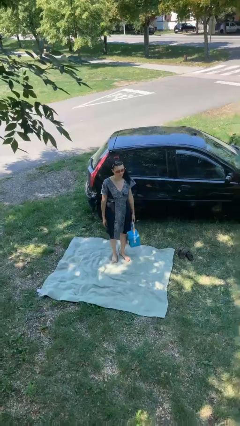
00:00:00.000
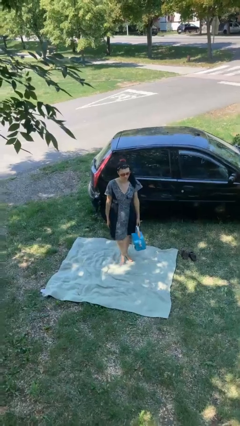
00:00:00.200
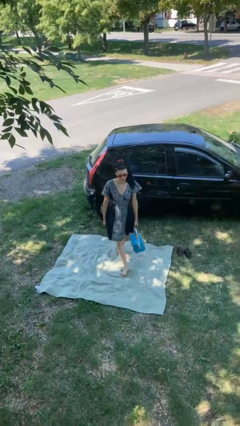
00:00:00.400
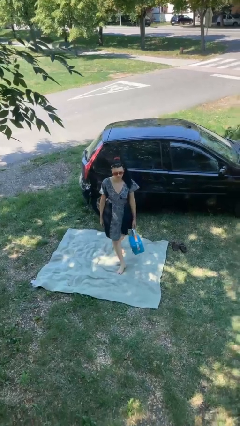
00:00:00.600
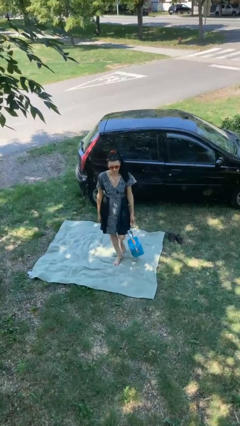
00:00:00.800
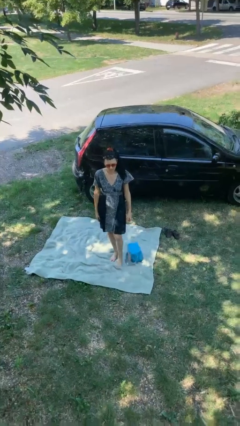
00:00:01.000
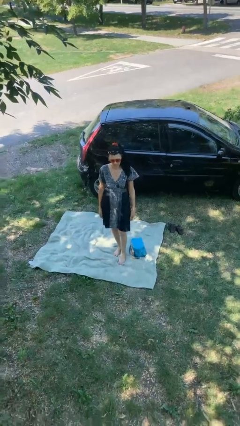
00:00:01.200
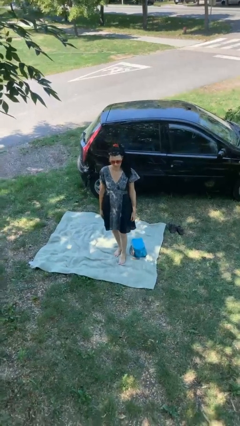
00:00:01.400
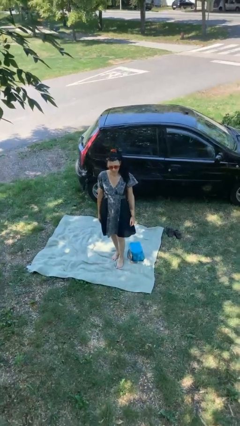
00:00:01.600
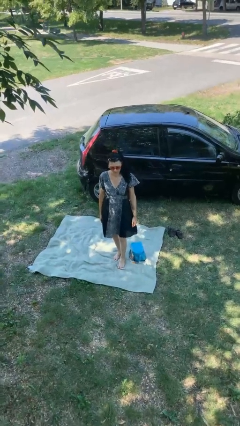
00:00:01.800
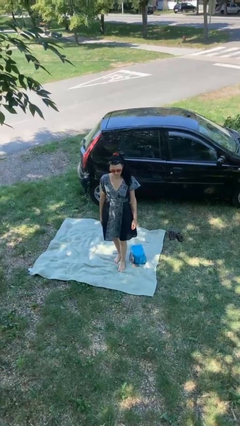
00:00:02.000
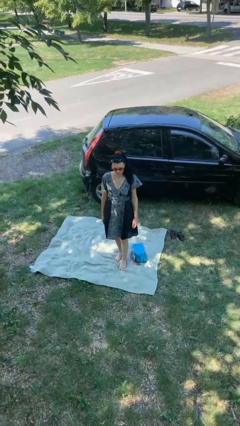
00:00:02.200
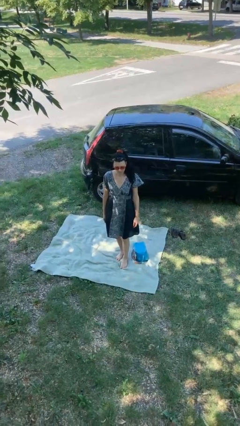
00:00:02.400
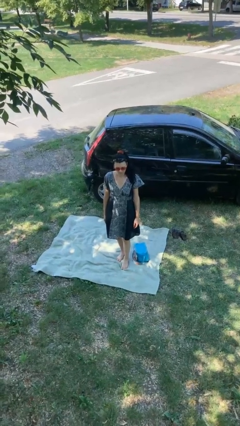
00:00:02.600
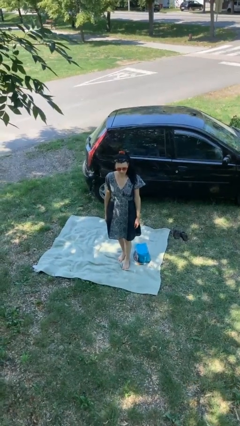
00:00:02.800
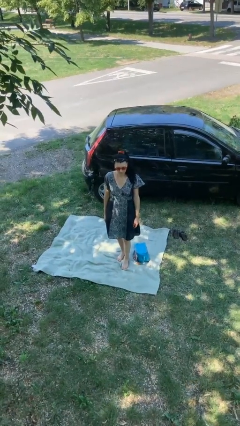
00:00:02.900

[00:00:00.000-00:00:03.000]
person drops object

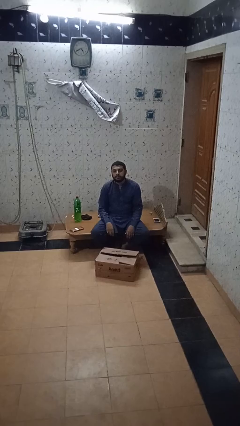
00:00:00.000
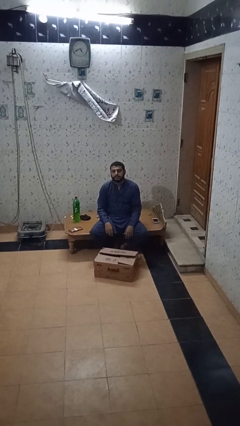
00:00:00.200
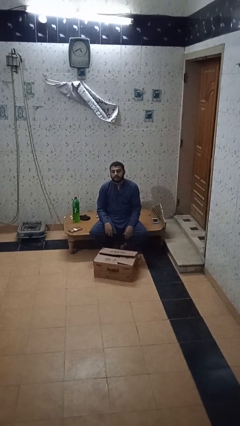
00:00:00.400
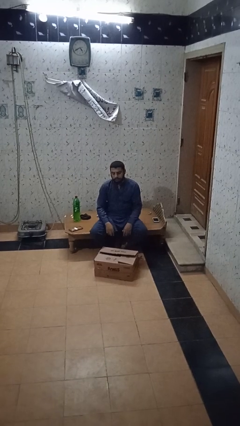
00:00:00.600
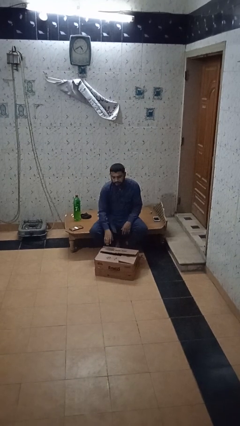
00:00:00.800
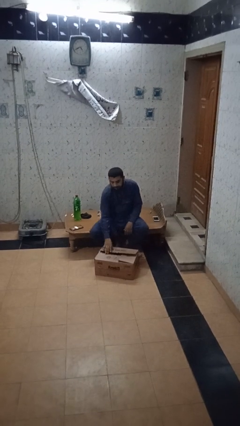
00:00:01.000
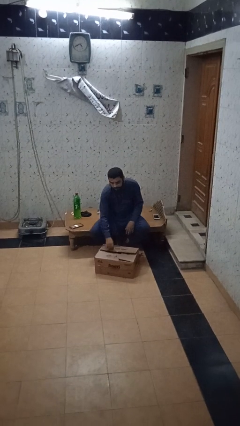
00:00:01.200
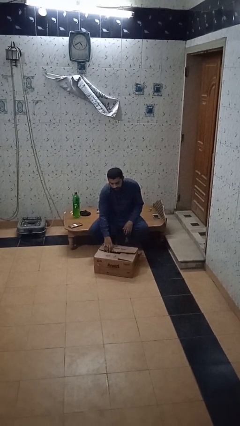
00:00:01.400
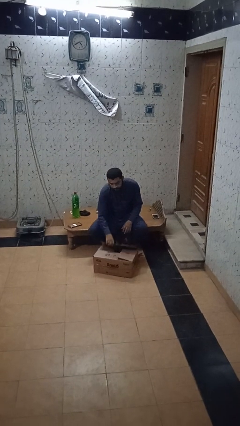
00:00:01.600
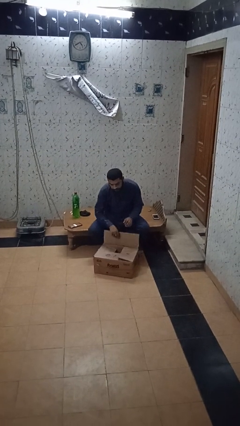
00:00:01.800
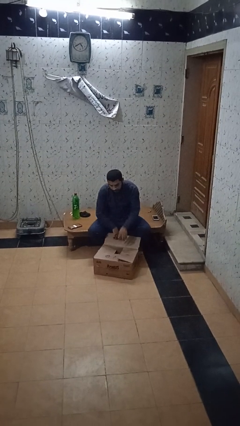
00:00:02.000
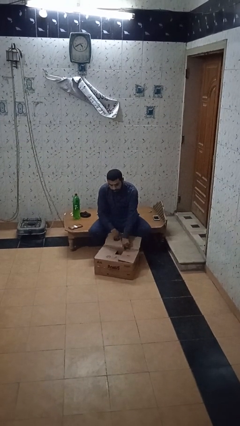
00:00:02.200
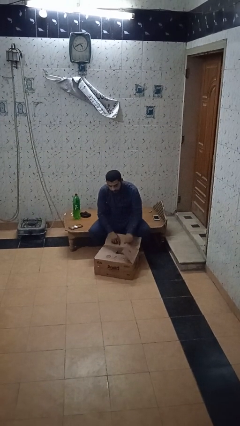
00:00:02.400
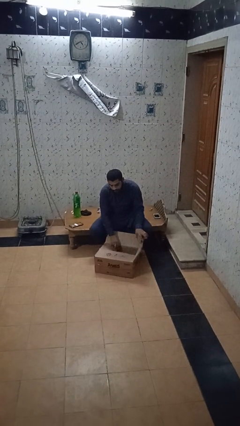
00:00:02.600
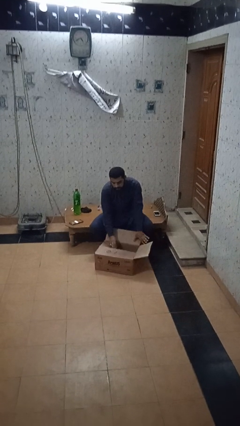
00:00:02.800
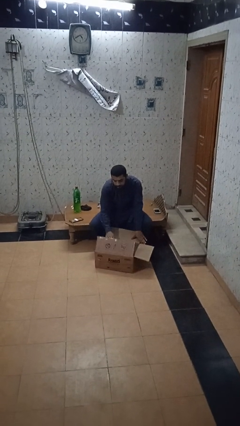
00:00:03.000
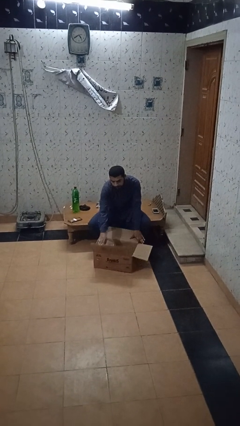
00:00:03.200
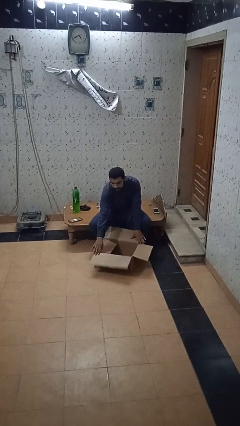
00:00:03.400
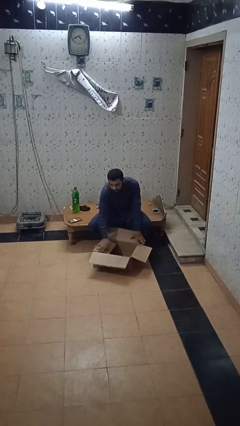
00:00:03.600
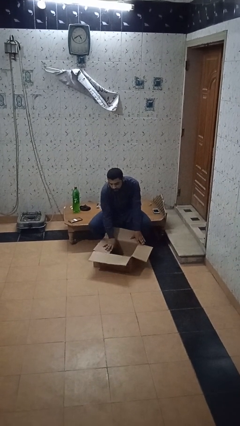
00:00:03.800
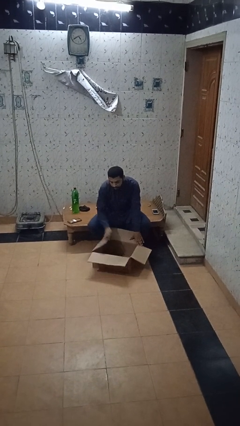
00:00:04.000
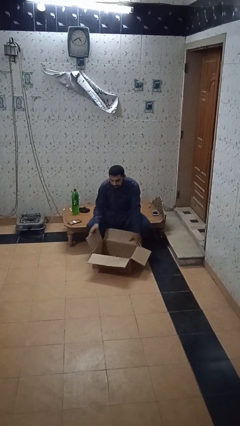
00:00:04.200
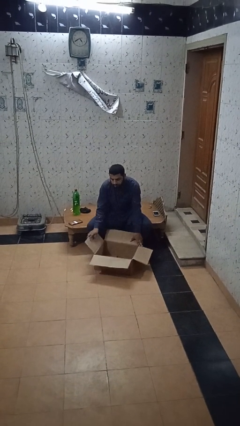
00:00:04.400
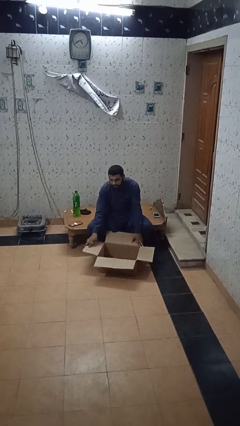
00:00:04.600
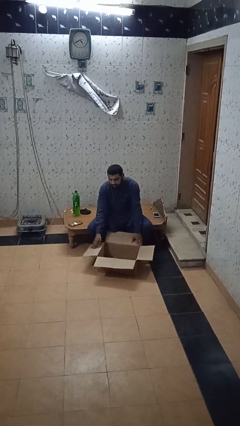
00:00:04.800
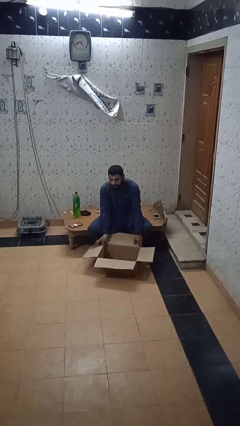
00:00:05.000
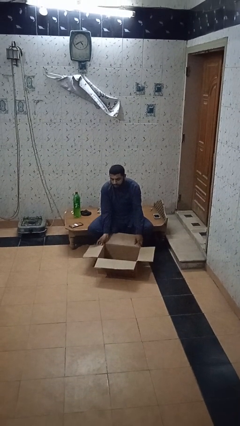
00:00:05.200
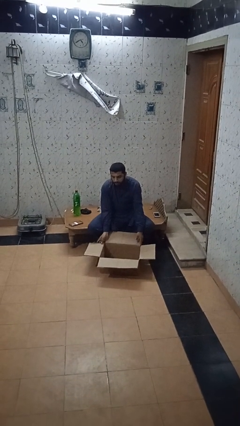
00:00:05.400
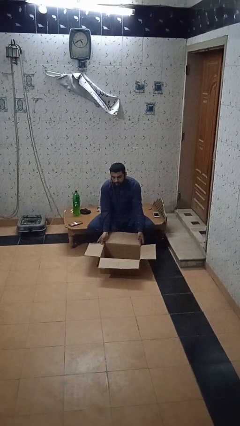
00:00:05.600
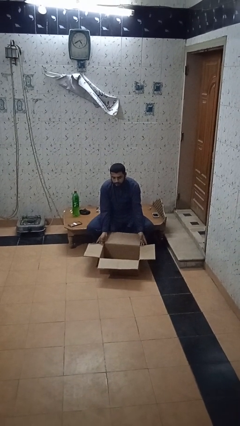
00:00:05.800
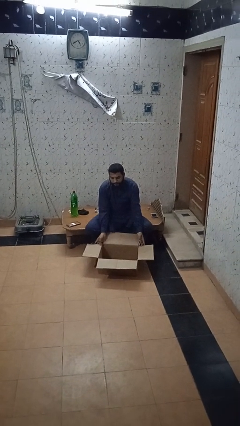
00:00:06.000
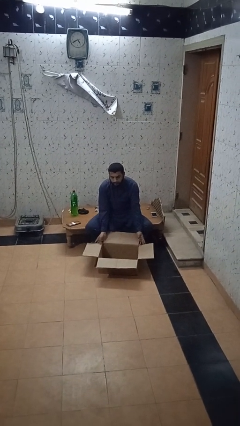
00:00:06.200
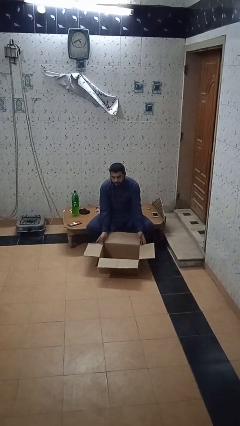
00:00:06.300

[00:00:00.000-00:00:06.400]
person opens box

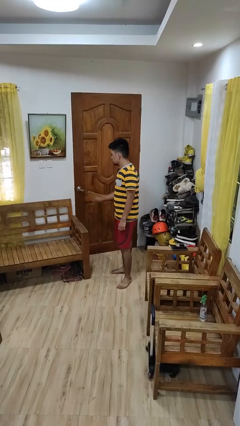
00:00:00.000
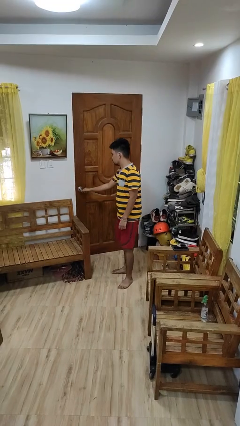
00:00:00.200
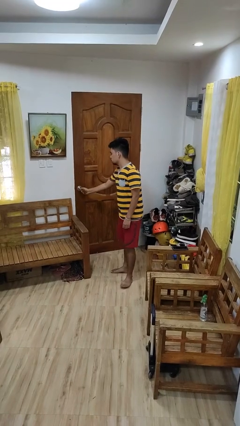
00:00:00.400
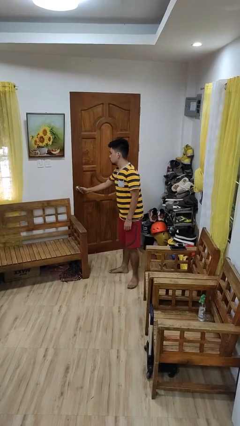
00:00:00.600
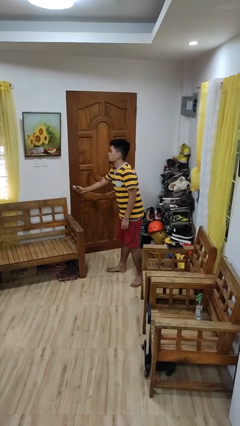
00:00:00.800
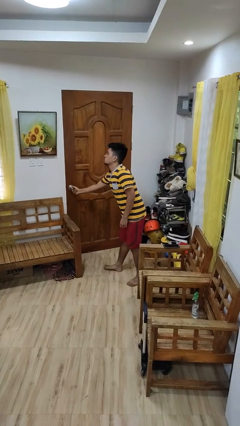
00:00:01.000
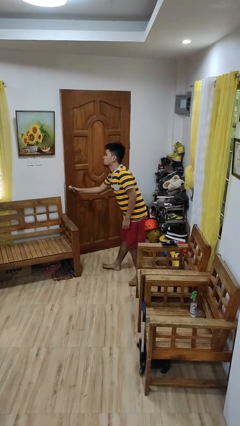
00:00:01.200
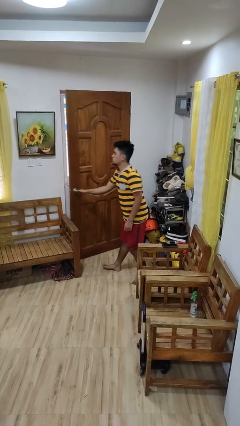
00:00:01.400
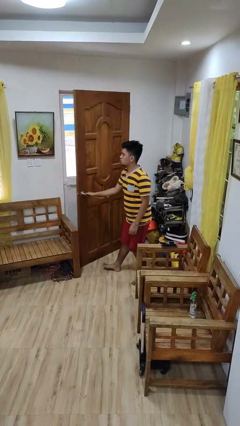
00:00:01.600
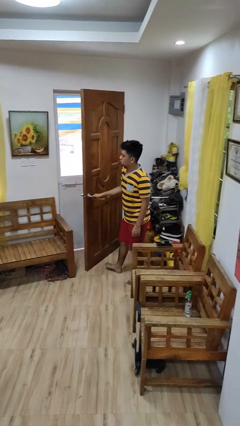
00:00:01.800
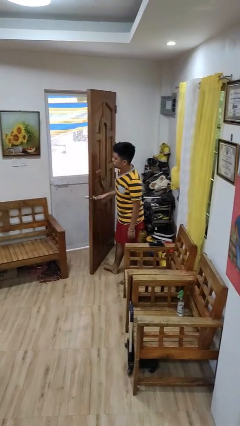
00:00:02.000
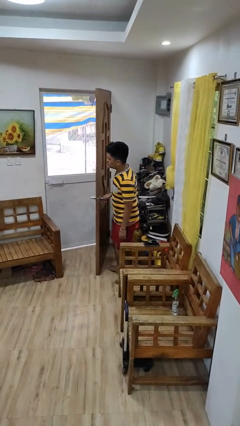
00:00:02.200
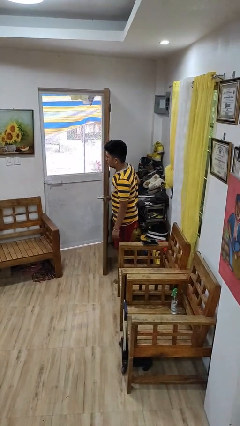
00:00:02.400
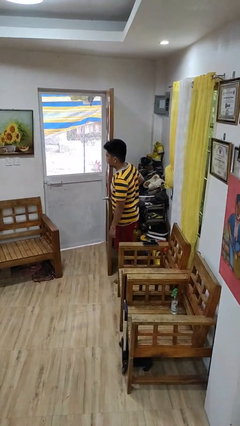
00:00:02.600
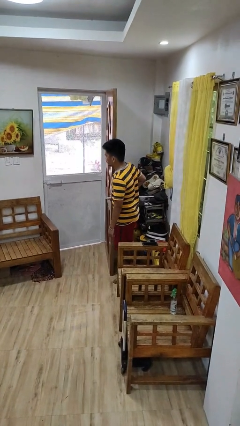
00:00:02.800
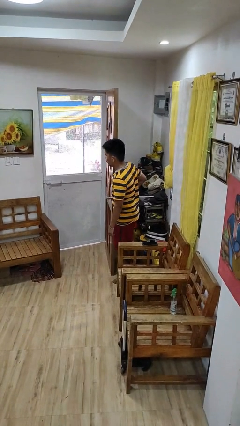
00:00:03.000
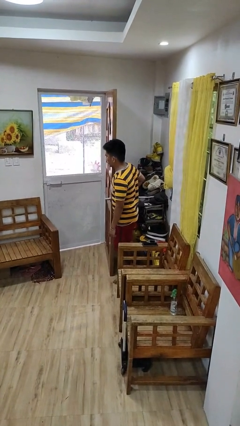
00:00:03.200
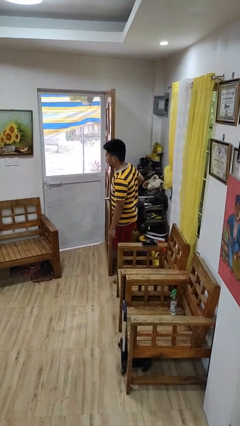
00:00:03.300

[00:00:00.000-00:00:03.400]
person opens facility door

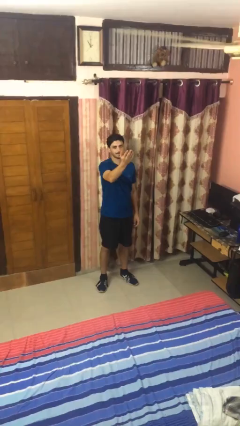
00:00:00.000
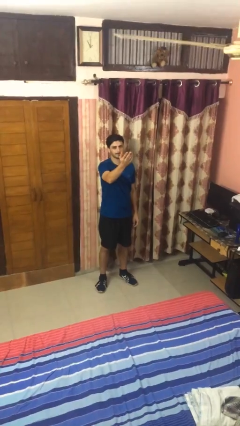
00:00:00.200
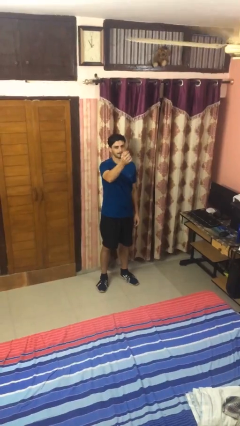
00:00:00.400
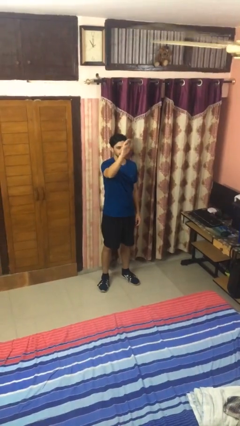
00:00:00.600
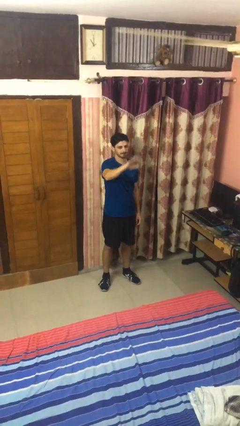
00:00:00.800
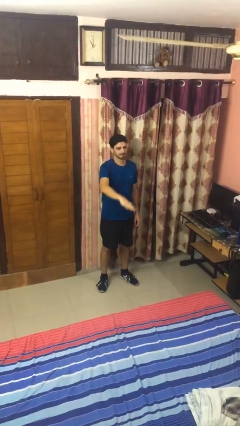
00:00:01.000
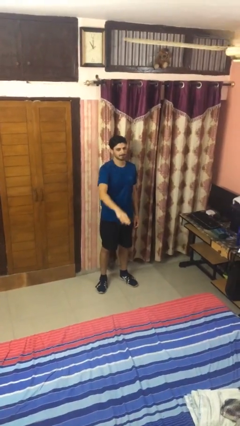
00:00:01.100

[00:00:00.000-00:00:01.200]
person gestures swipe down

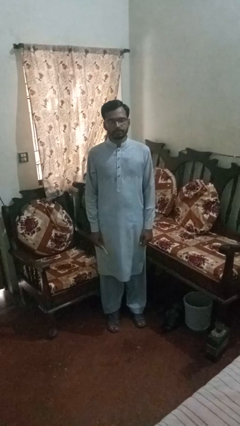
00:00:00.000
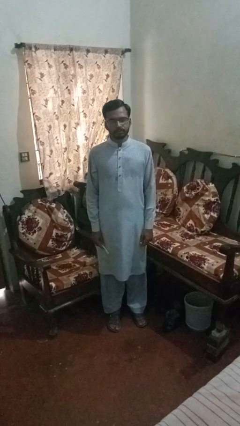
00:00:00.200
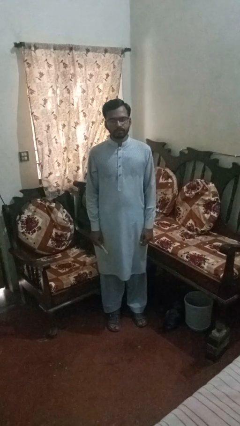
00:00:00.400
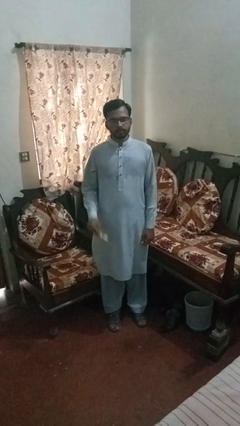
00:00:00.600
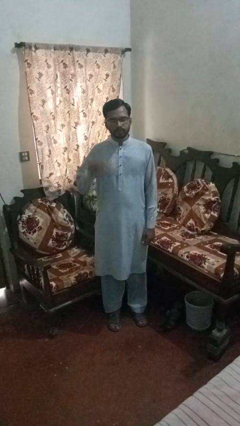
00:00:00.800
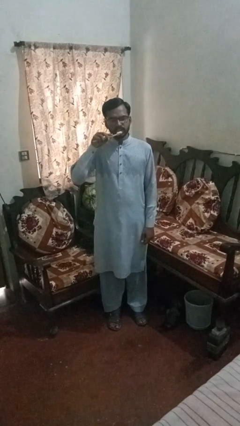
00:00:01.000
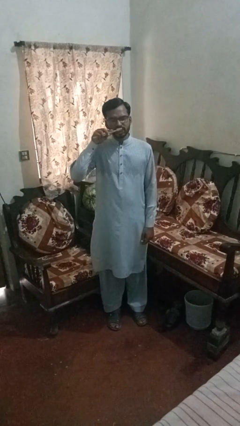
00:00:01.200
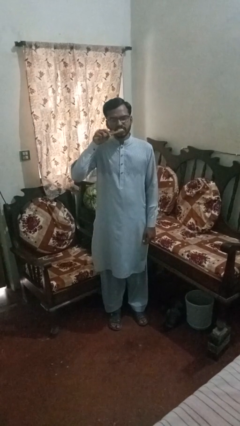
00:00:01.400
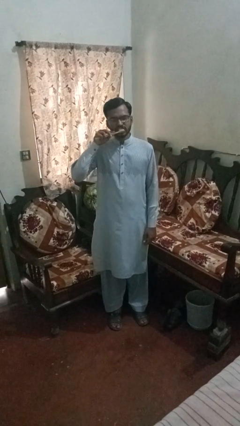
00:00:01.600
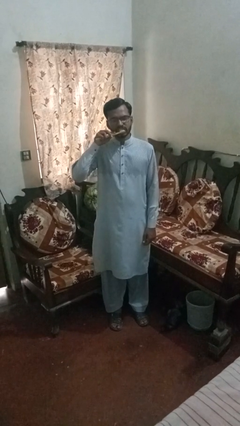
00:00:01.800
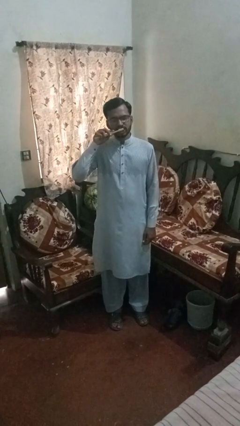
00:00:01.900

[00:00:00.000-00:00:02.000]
person brushes teeth

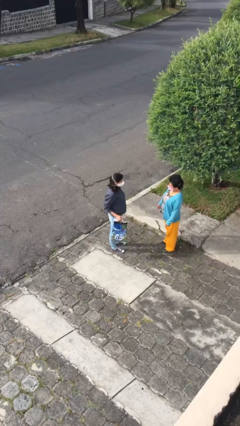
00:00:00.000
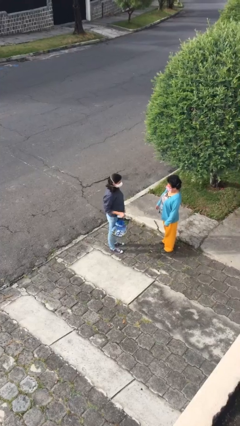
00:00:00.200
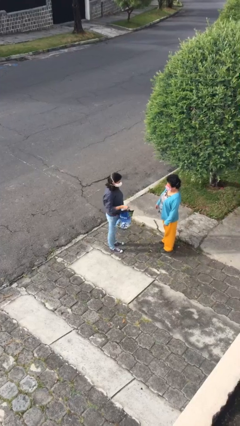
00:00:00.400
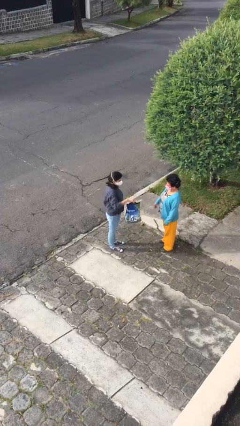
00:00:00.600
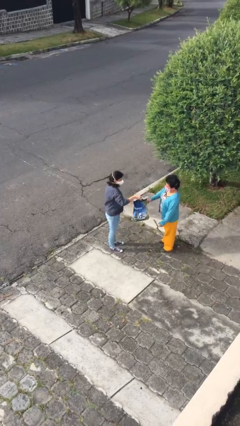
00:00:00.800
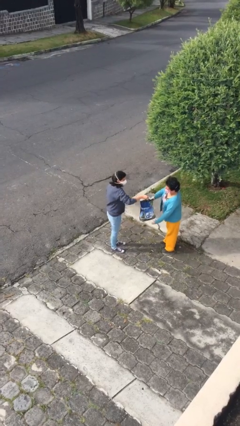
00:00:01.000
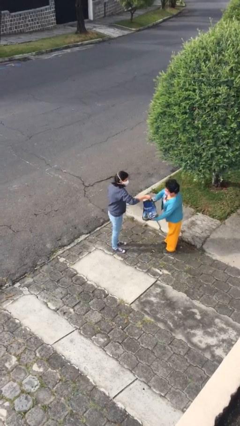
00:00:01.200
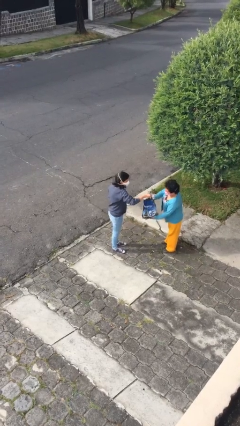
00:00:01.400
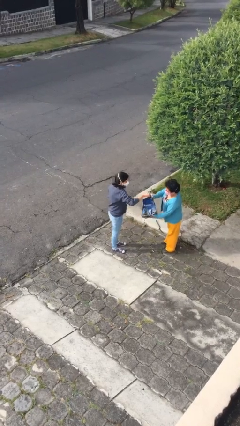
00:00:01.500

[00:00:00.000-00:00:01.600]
person transfers object to person
